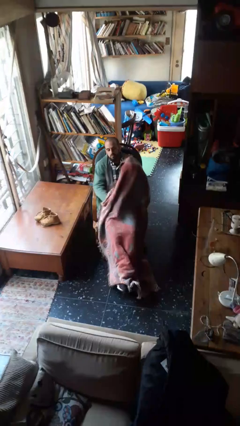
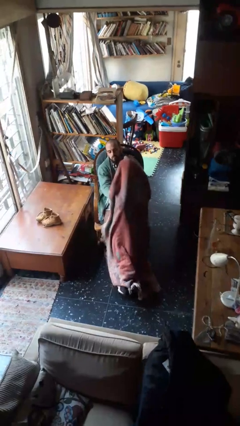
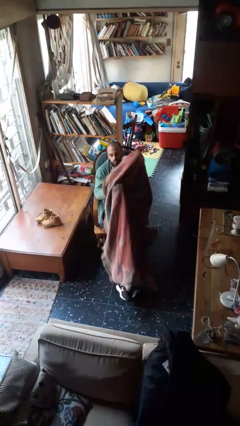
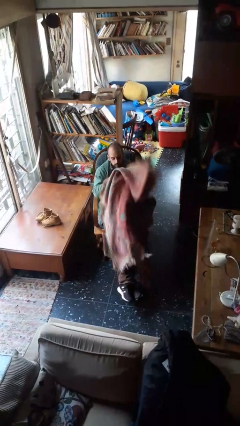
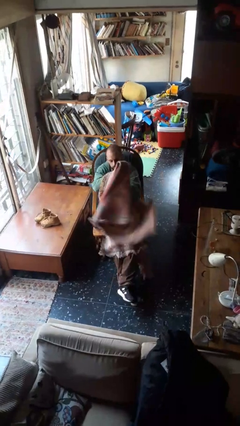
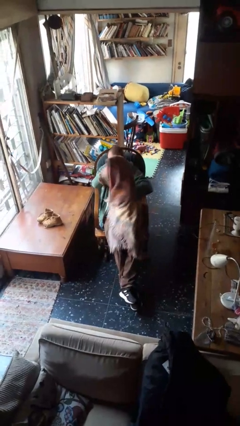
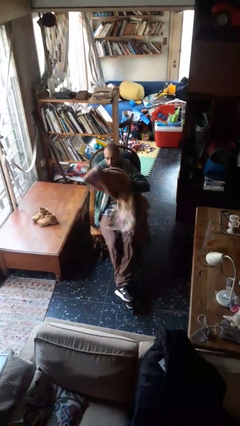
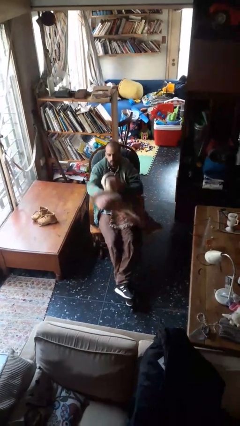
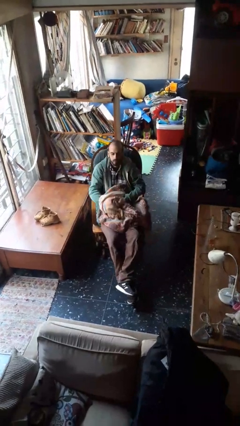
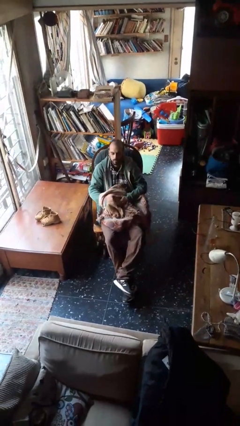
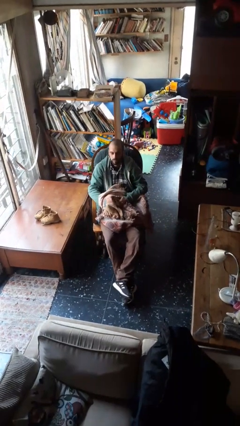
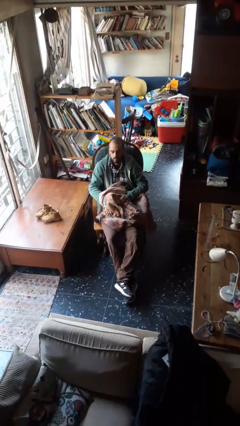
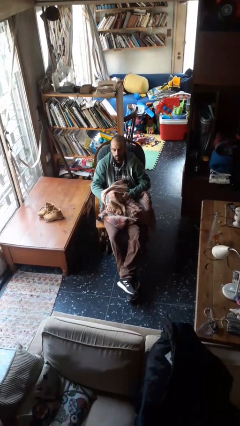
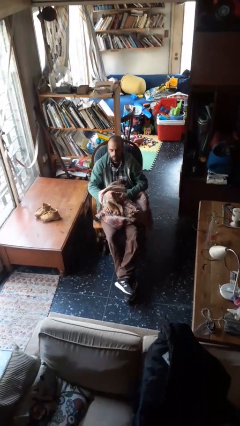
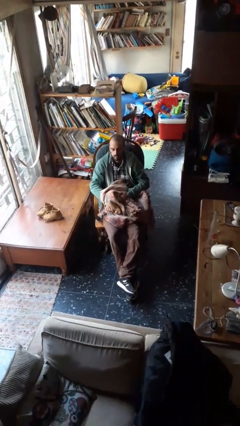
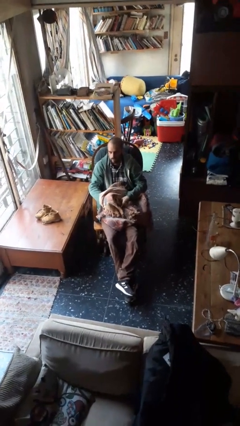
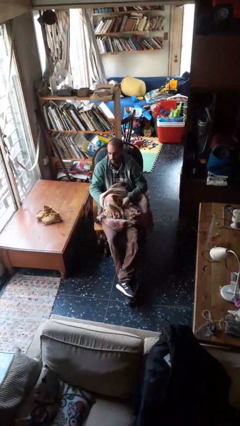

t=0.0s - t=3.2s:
person uncovers with blanket

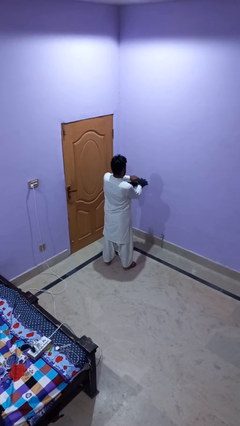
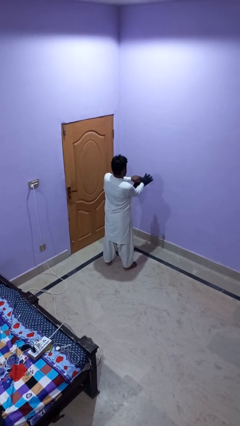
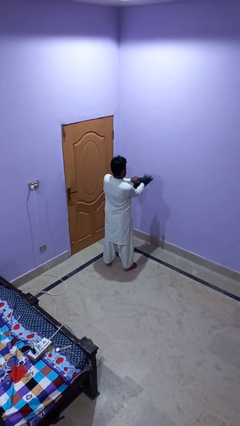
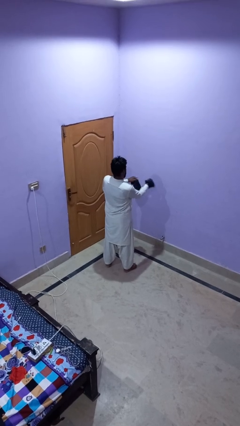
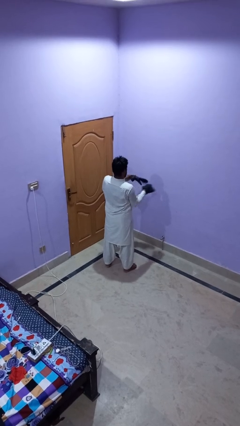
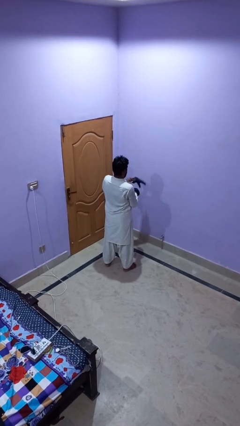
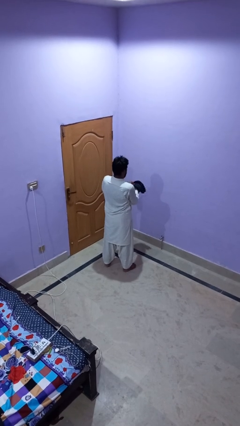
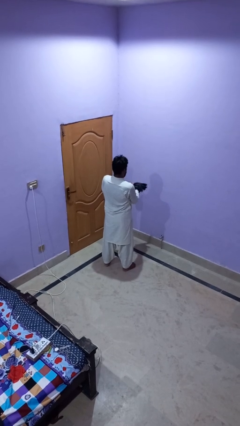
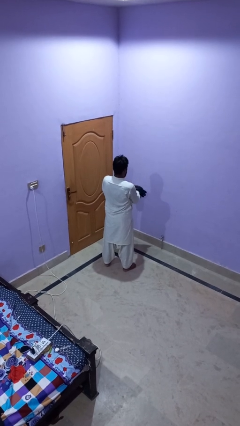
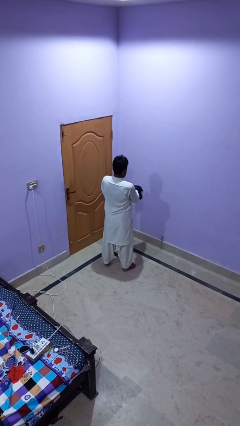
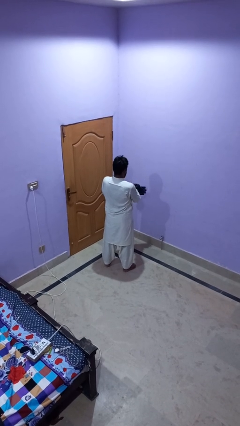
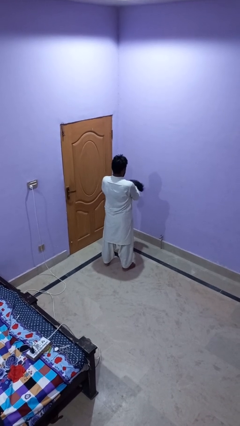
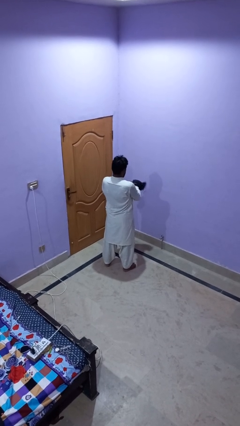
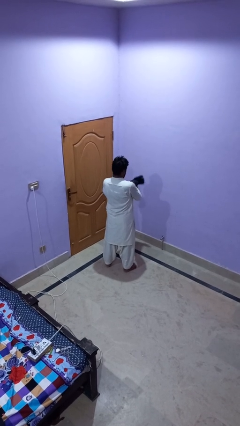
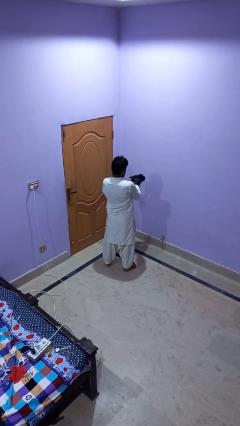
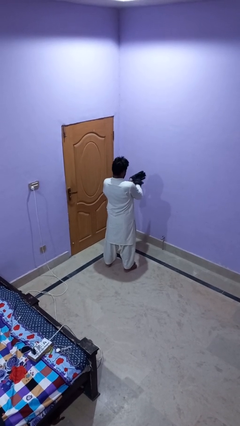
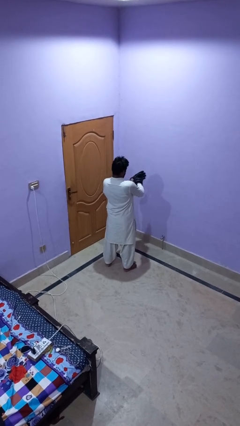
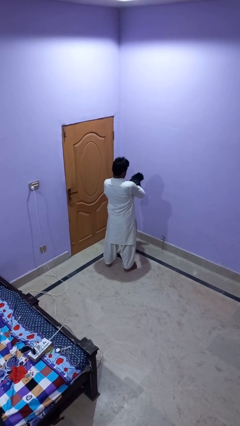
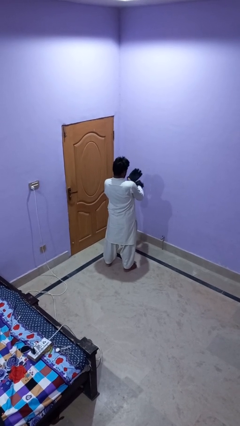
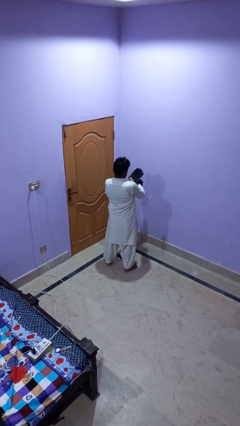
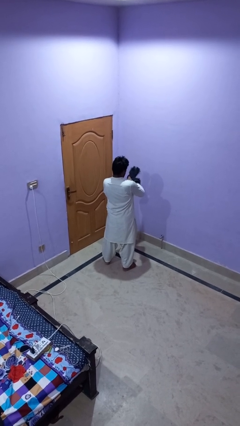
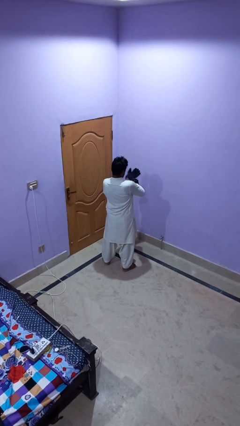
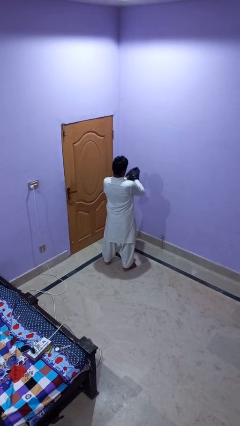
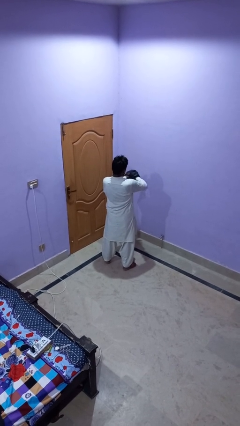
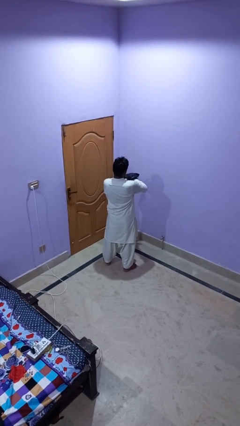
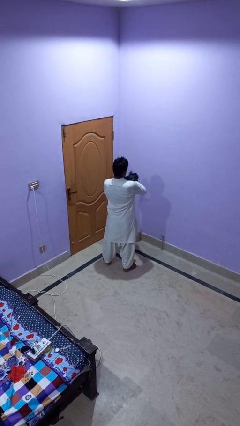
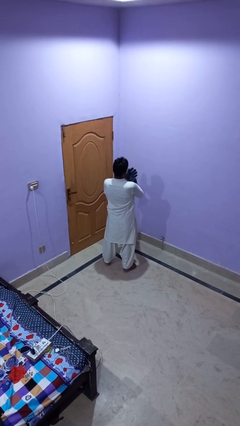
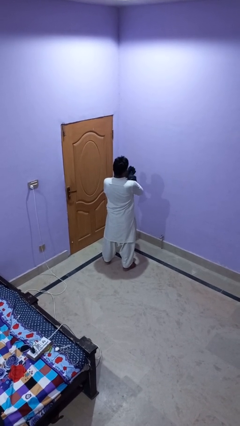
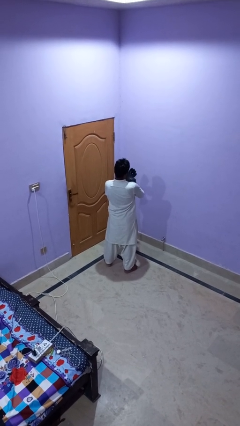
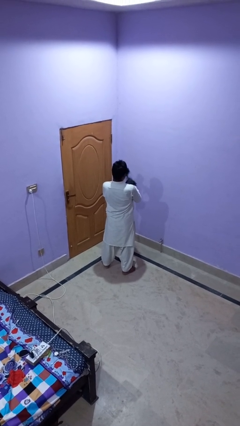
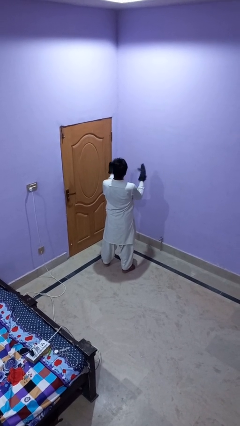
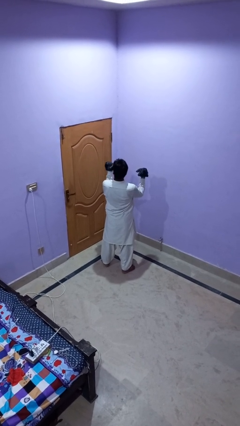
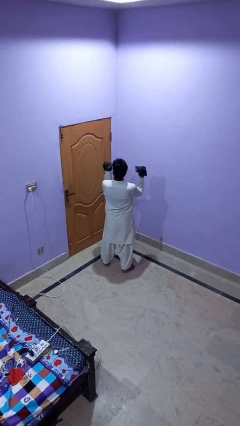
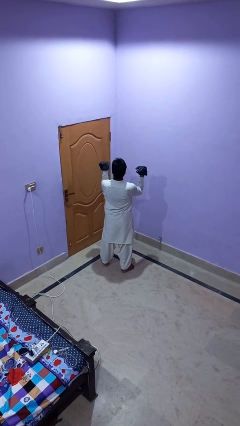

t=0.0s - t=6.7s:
person puts on gloves

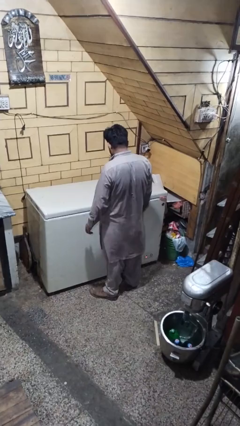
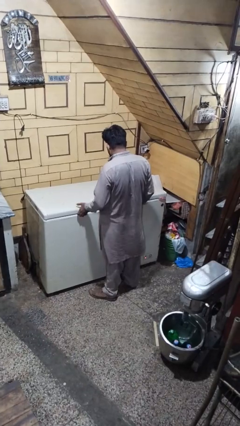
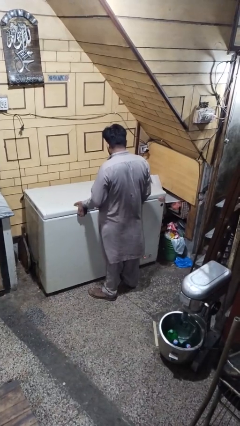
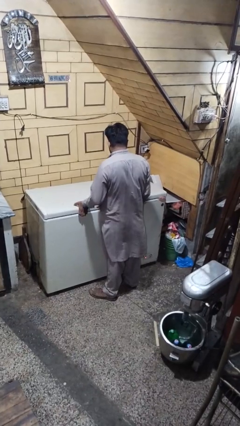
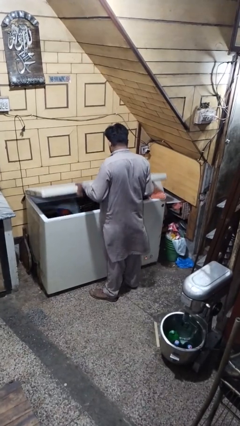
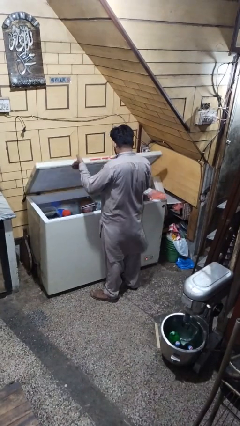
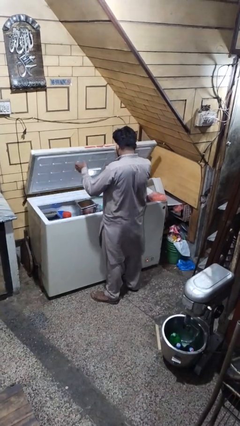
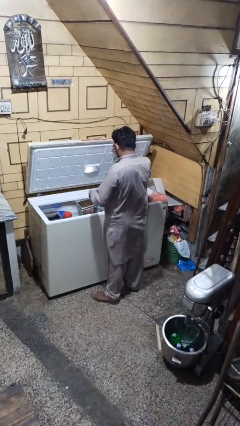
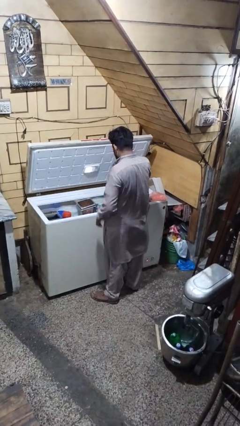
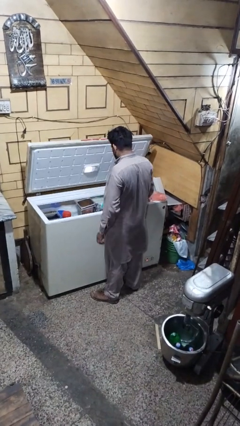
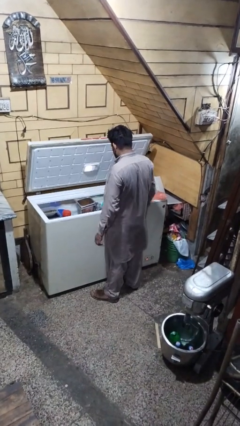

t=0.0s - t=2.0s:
person opens refrigerator

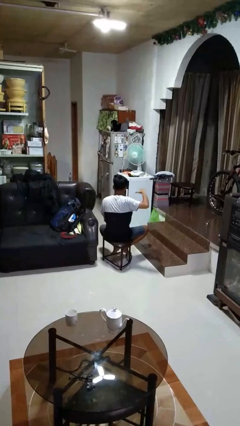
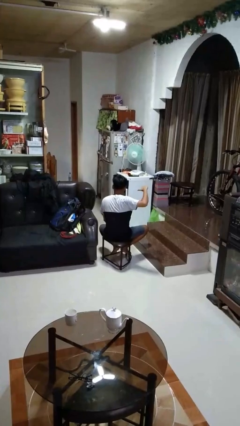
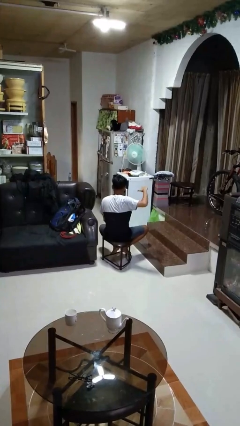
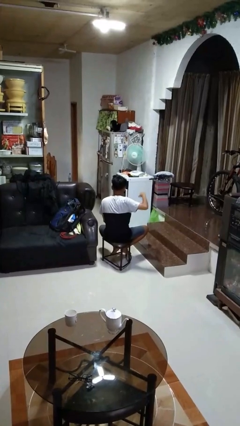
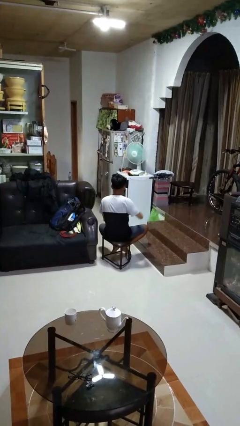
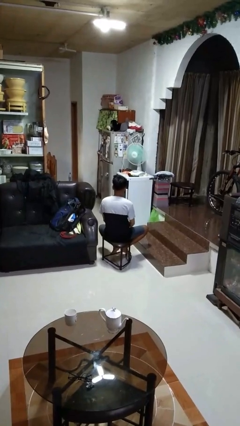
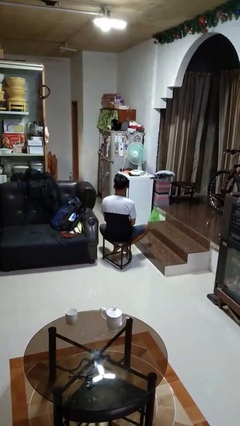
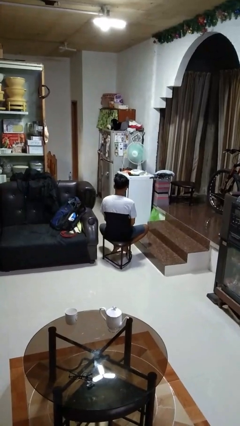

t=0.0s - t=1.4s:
person gestures cut

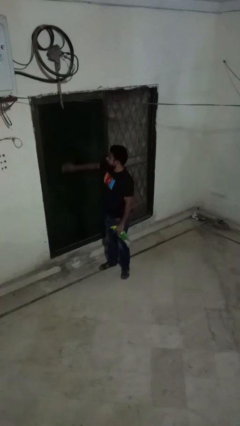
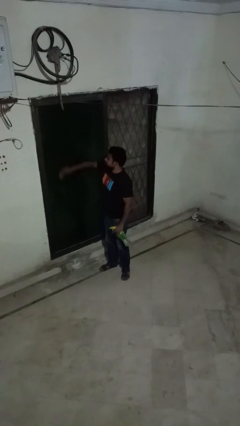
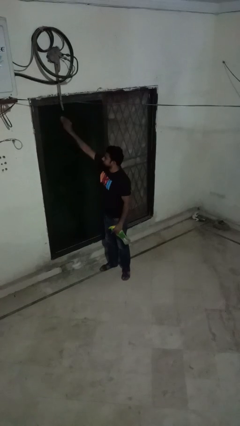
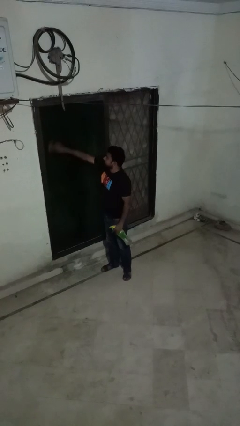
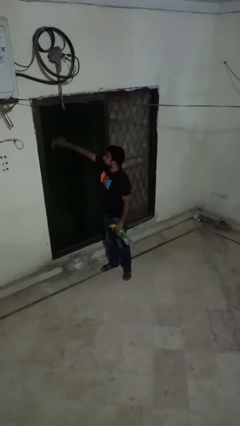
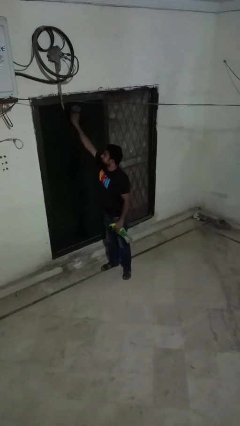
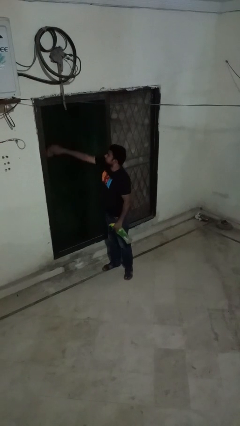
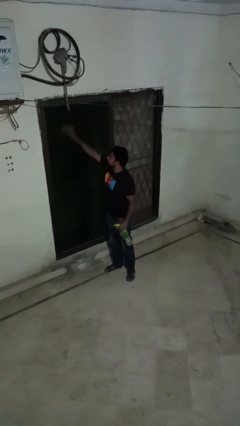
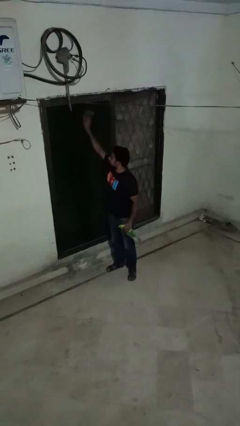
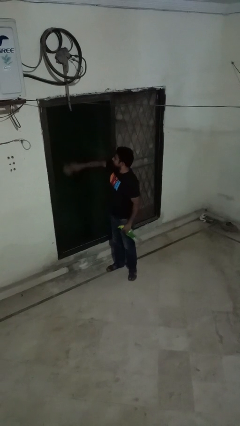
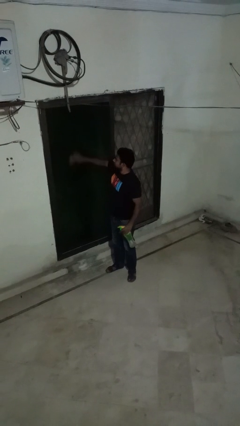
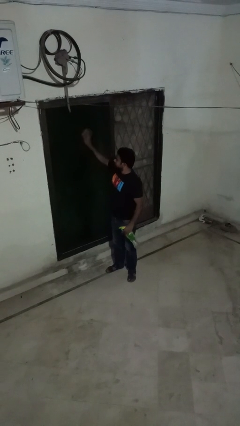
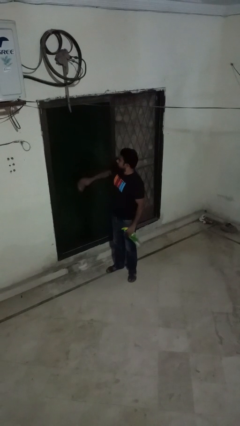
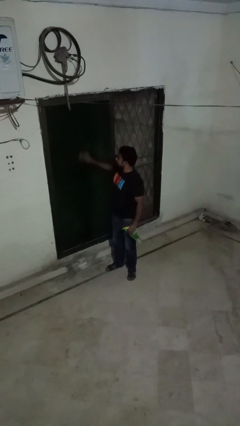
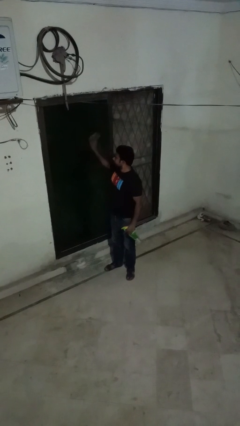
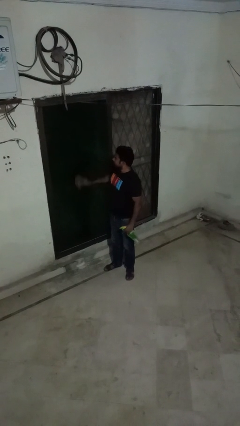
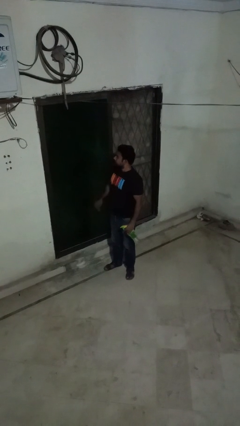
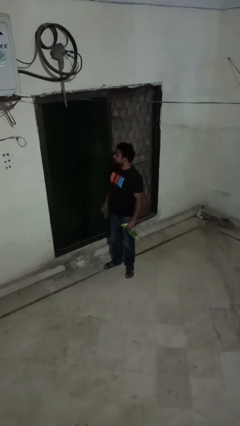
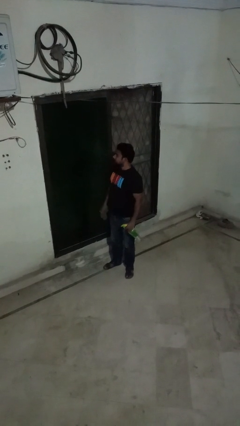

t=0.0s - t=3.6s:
person washes window

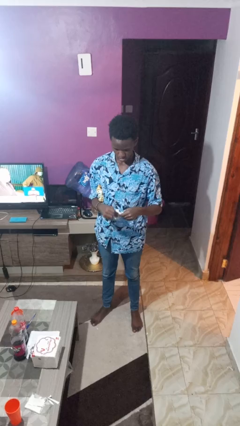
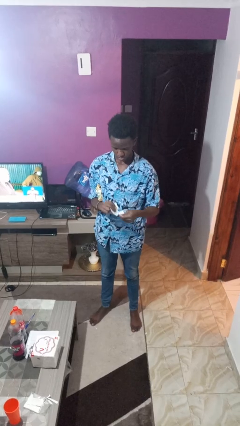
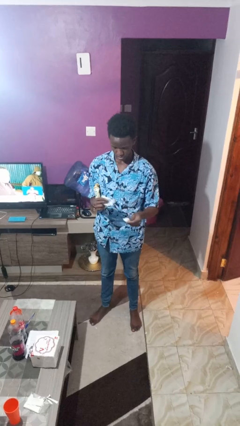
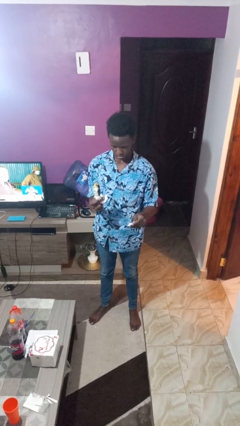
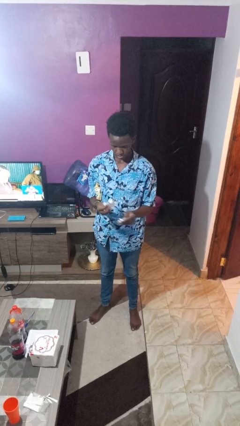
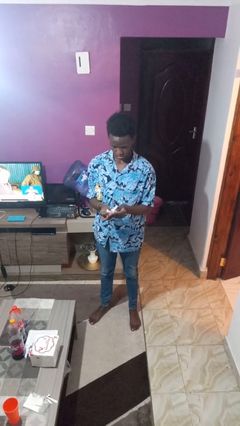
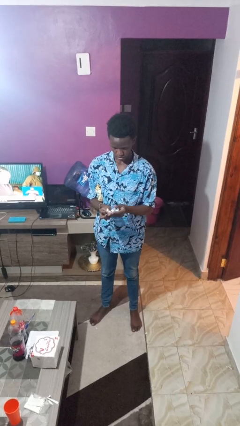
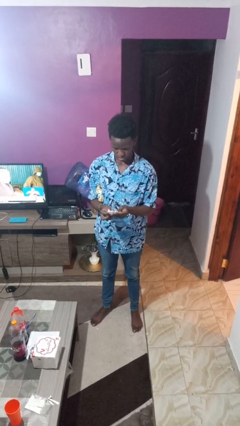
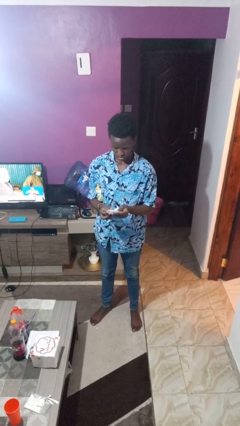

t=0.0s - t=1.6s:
person tears paper
